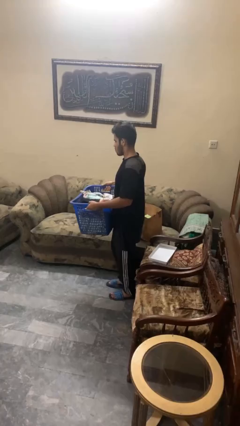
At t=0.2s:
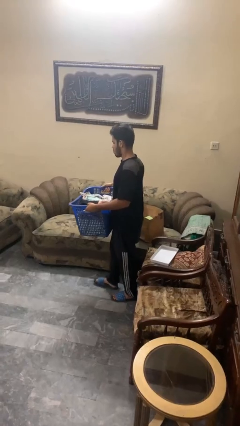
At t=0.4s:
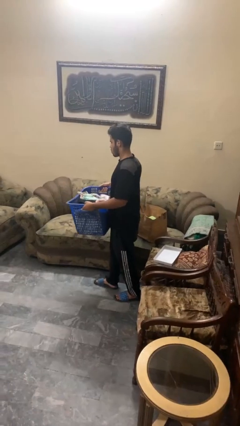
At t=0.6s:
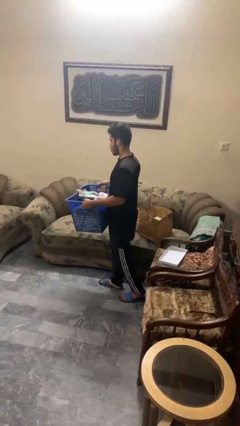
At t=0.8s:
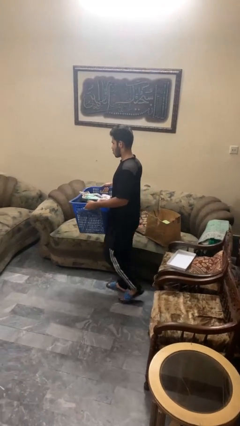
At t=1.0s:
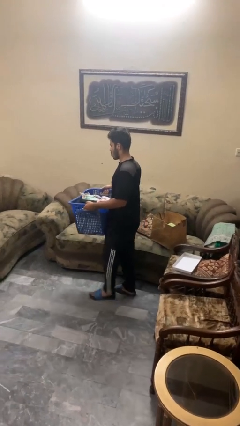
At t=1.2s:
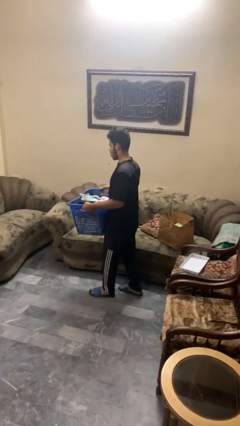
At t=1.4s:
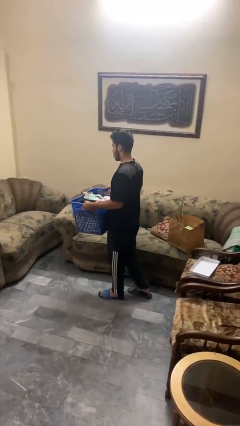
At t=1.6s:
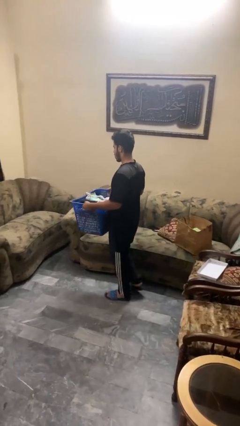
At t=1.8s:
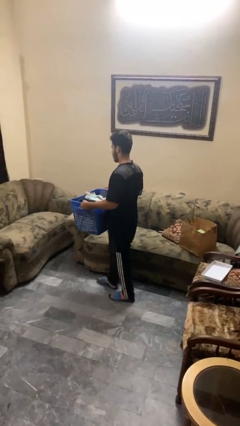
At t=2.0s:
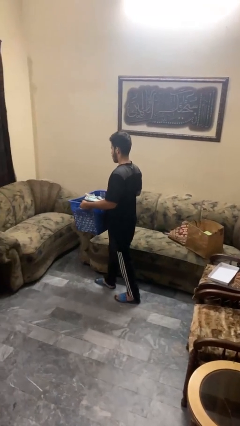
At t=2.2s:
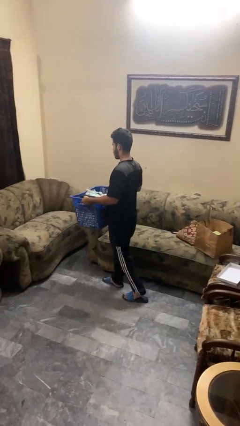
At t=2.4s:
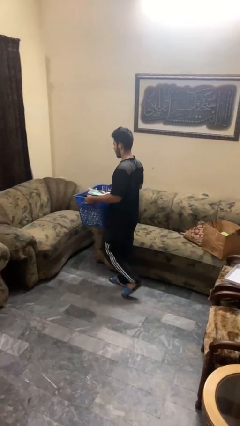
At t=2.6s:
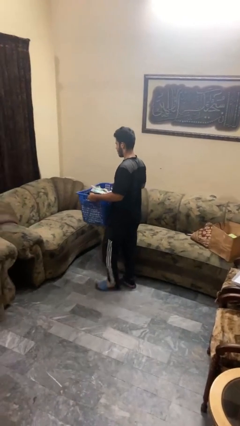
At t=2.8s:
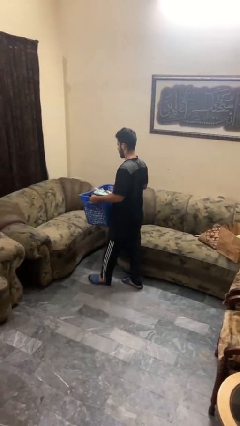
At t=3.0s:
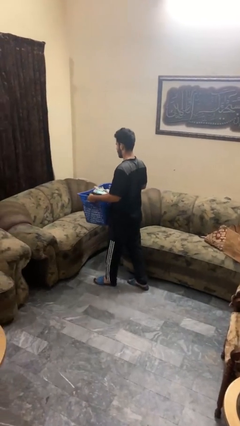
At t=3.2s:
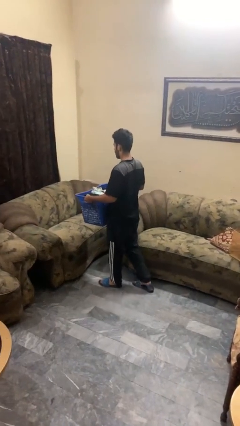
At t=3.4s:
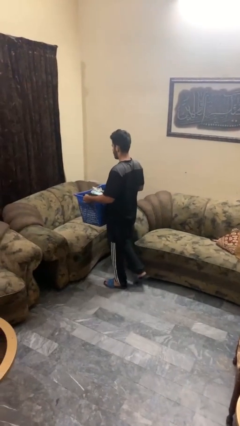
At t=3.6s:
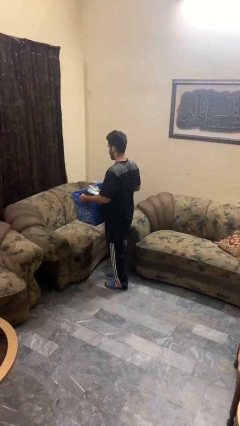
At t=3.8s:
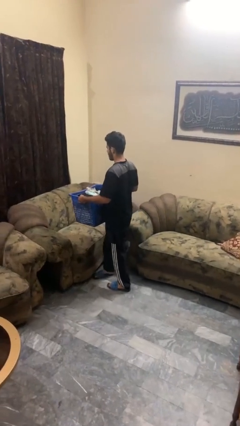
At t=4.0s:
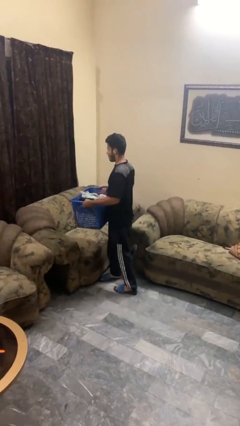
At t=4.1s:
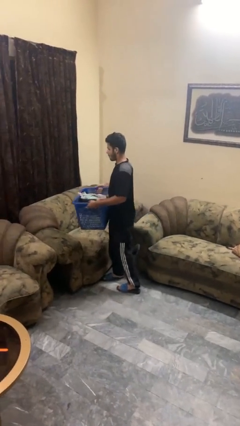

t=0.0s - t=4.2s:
person carries laundry basket

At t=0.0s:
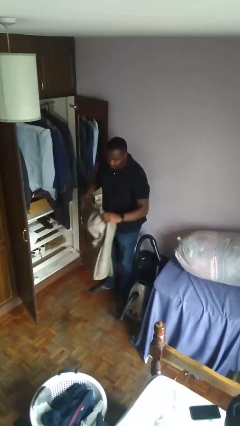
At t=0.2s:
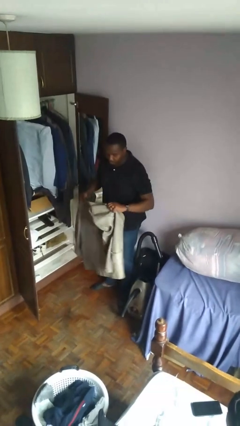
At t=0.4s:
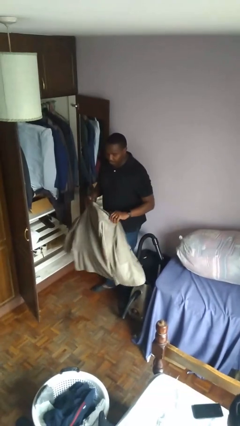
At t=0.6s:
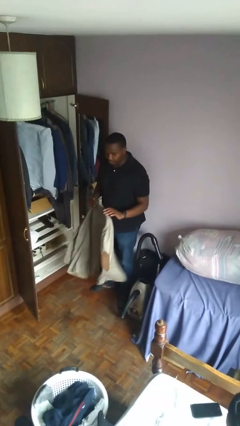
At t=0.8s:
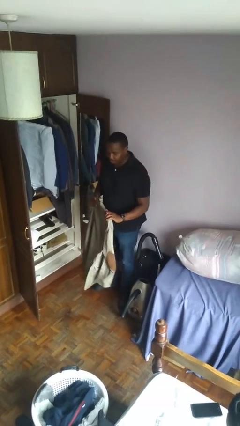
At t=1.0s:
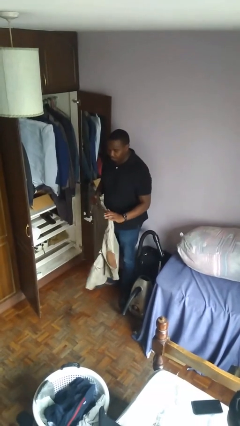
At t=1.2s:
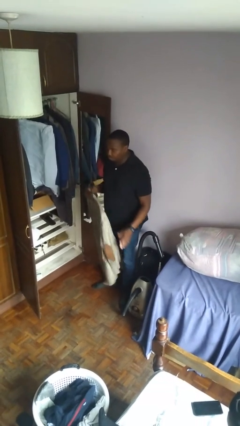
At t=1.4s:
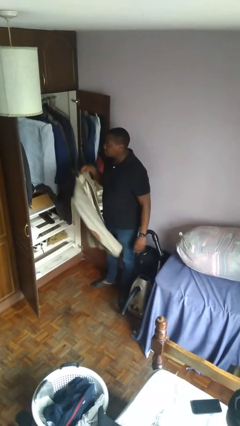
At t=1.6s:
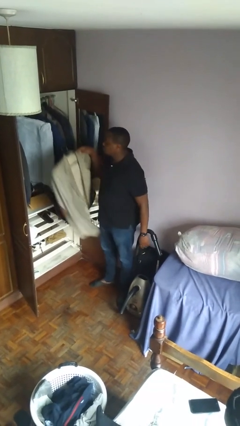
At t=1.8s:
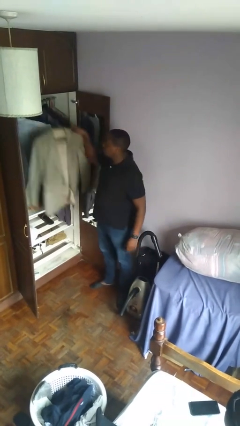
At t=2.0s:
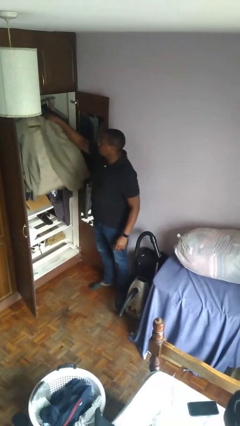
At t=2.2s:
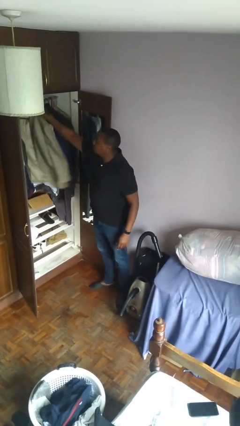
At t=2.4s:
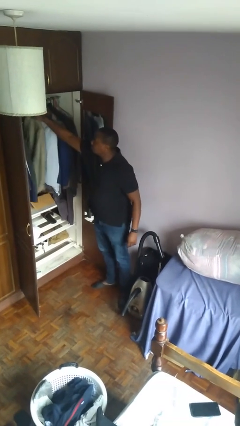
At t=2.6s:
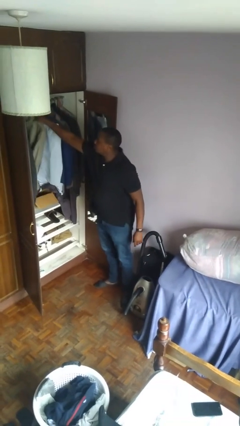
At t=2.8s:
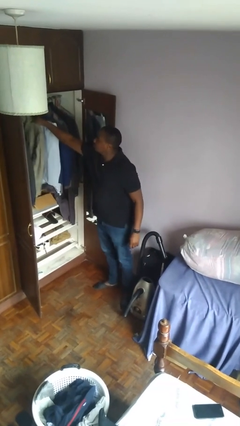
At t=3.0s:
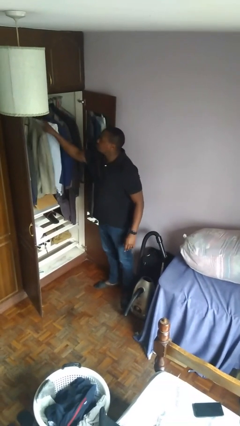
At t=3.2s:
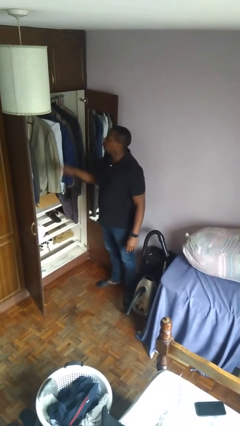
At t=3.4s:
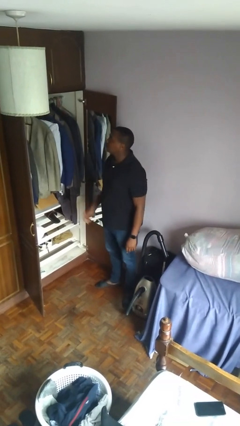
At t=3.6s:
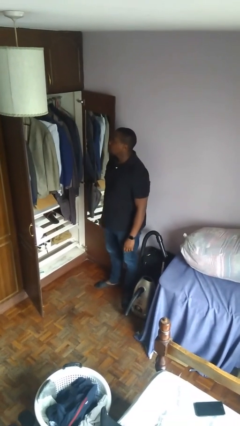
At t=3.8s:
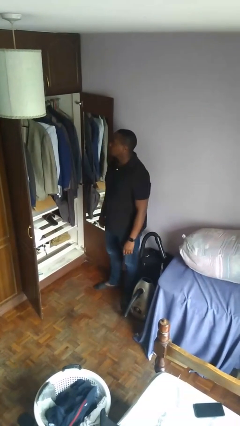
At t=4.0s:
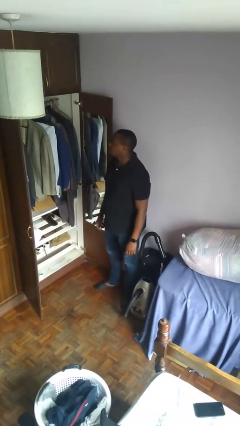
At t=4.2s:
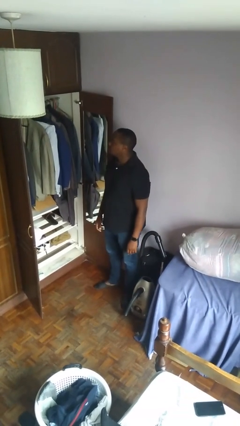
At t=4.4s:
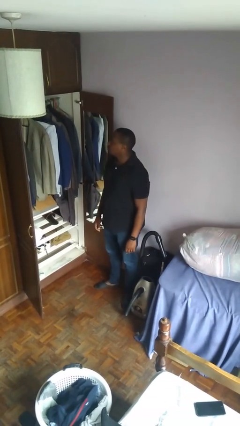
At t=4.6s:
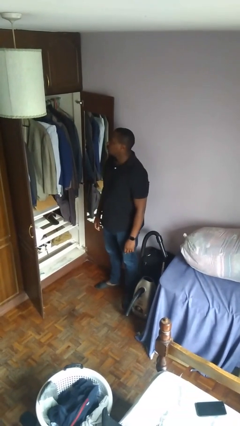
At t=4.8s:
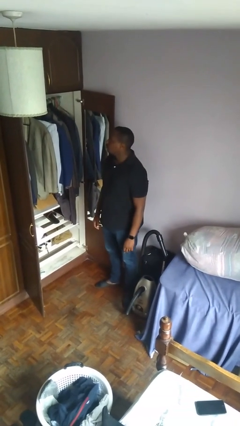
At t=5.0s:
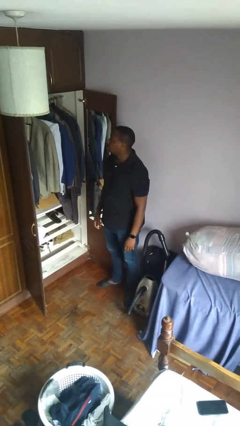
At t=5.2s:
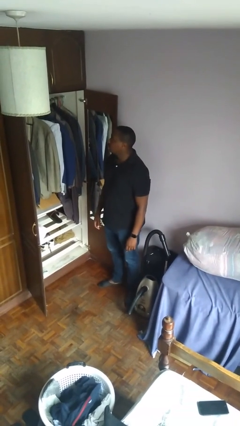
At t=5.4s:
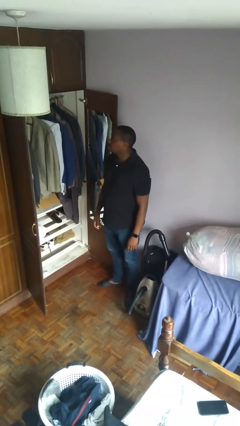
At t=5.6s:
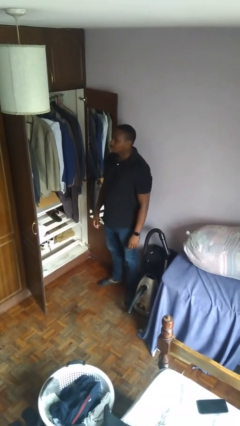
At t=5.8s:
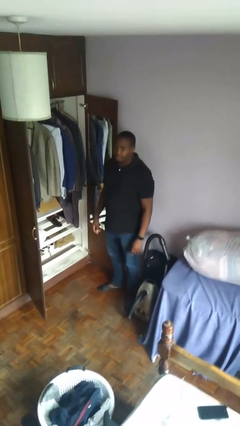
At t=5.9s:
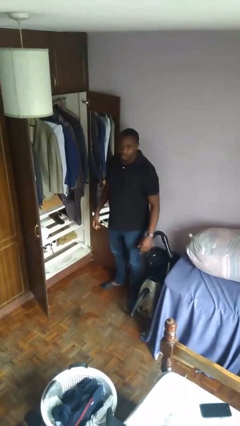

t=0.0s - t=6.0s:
person puts clothes into closet

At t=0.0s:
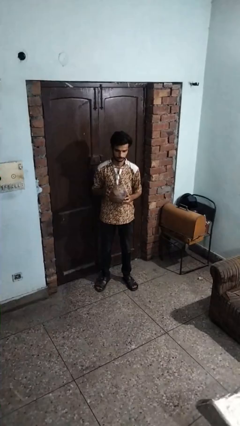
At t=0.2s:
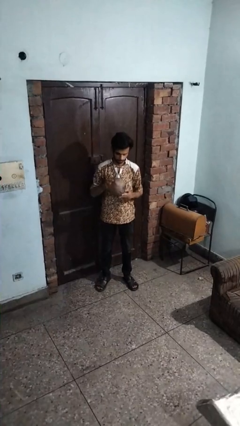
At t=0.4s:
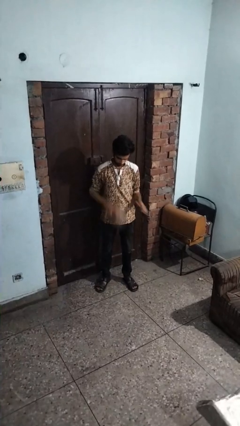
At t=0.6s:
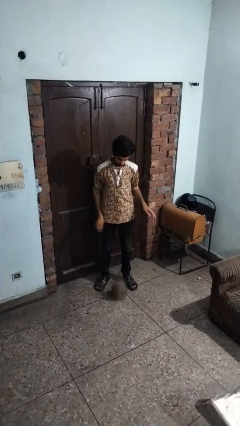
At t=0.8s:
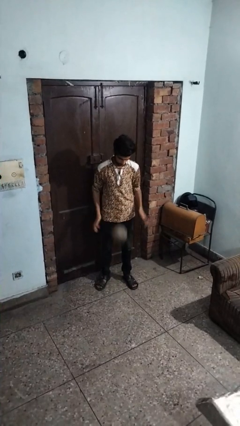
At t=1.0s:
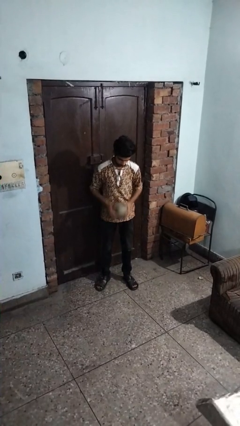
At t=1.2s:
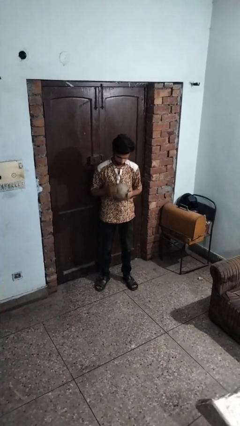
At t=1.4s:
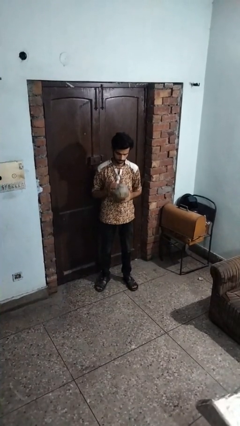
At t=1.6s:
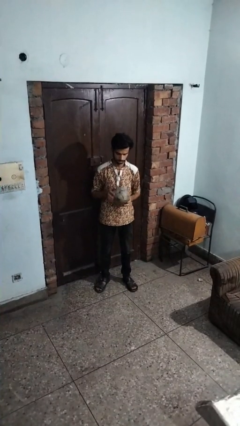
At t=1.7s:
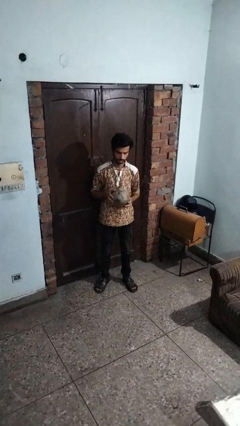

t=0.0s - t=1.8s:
person bounces ball on floor

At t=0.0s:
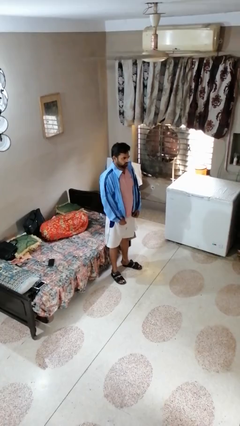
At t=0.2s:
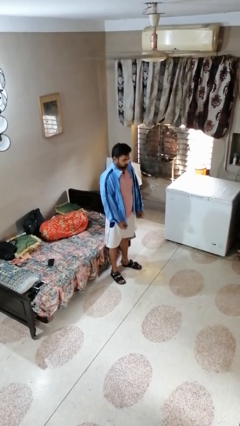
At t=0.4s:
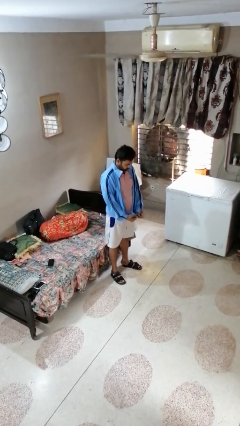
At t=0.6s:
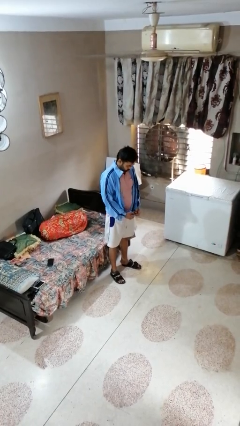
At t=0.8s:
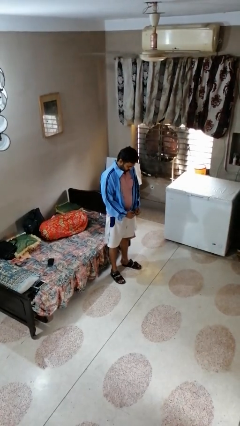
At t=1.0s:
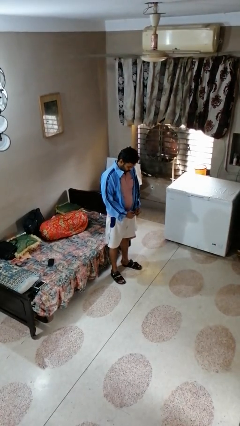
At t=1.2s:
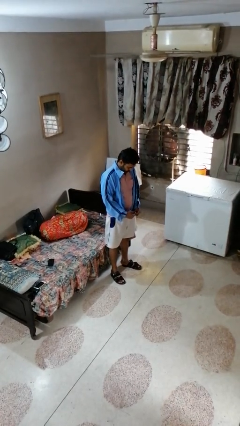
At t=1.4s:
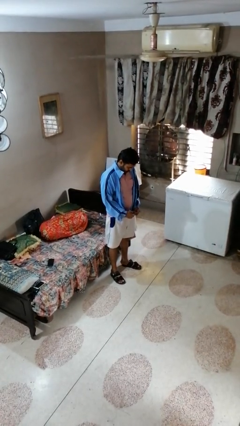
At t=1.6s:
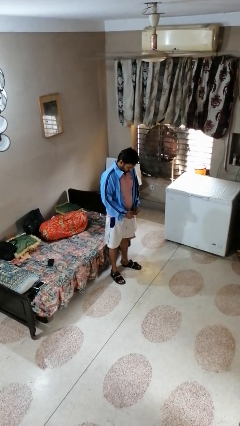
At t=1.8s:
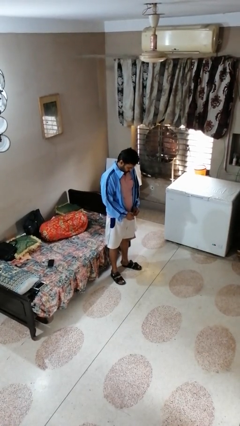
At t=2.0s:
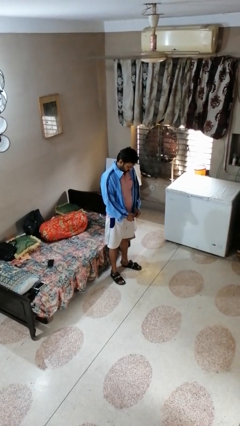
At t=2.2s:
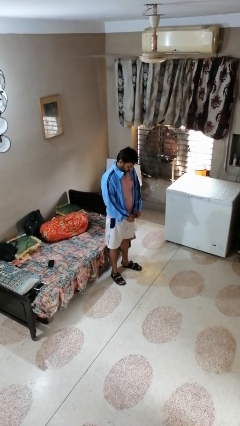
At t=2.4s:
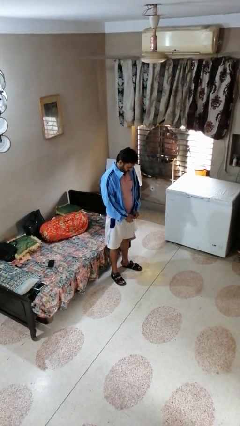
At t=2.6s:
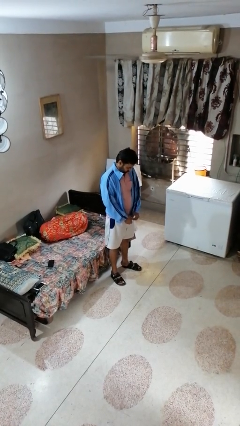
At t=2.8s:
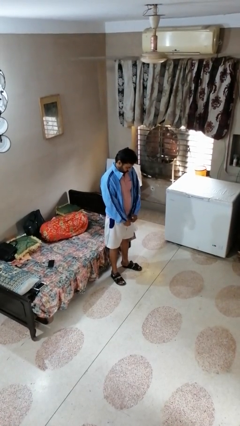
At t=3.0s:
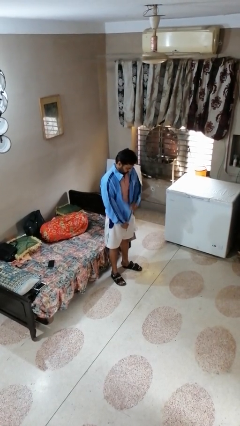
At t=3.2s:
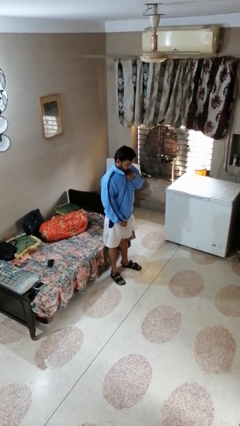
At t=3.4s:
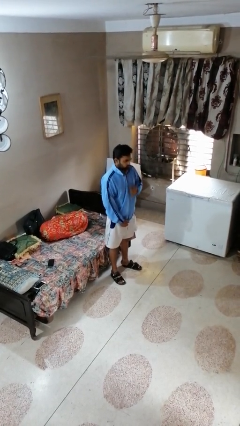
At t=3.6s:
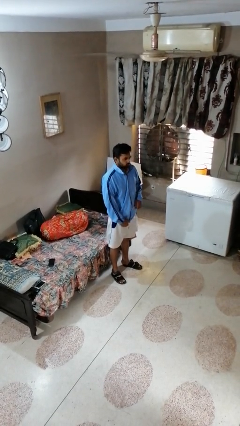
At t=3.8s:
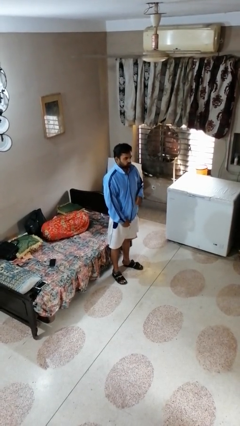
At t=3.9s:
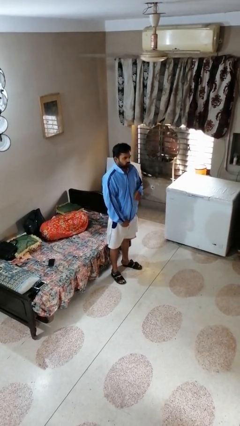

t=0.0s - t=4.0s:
person zips up jacket

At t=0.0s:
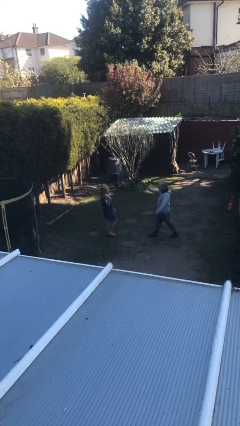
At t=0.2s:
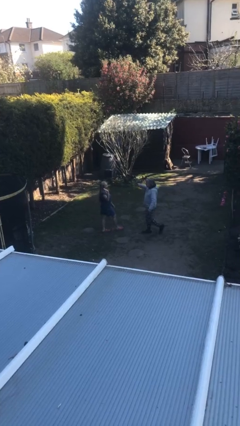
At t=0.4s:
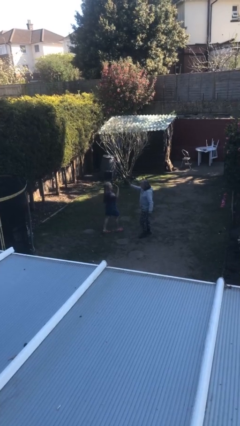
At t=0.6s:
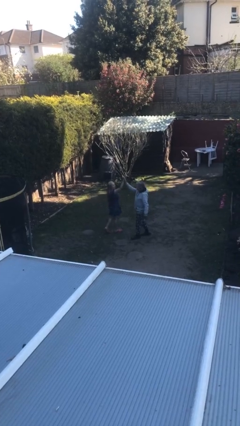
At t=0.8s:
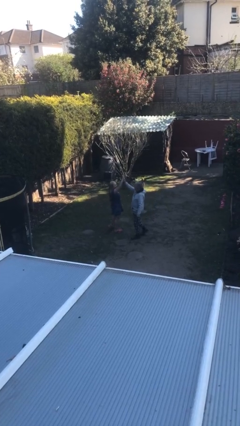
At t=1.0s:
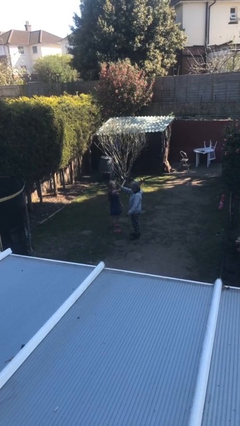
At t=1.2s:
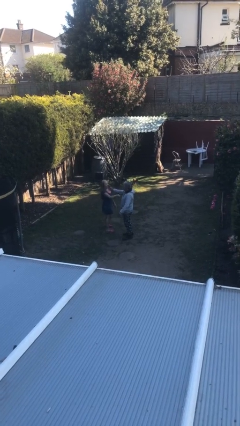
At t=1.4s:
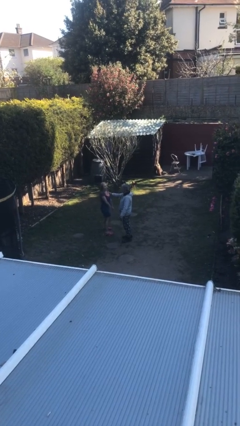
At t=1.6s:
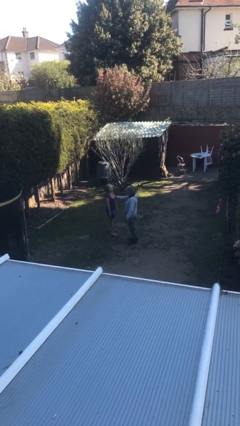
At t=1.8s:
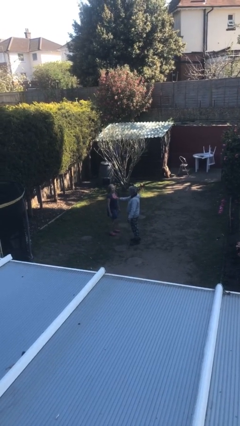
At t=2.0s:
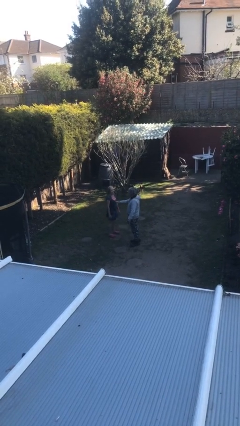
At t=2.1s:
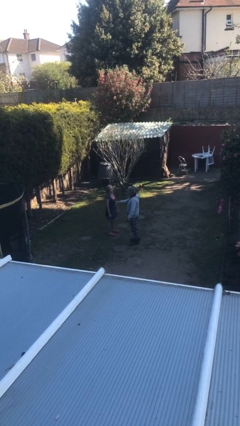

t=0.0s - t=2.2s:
person highfives hand
